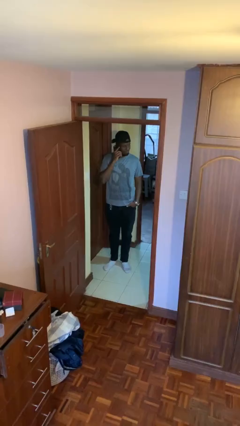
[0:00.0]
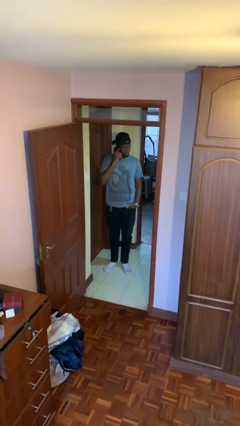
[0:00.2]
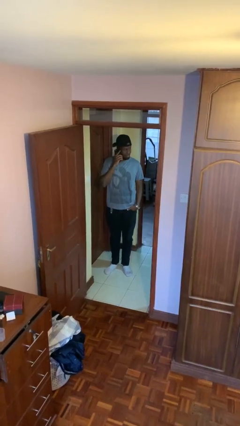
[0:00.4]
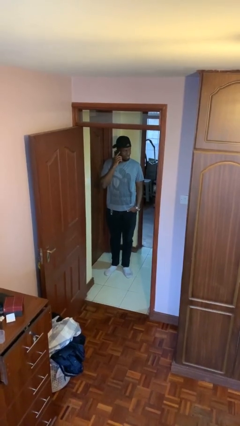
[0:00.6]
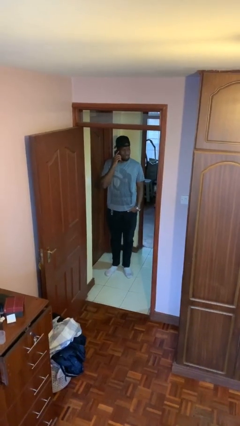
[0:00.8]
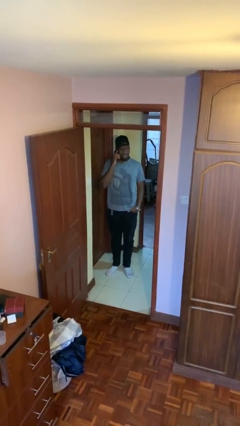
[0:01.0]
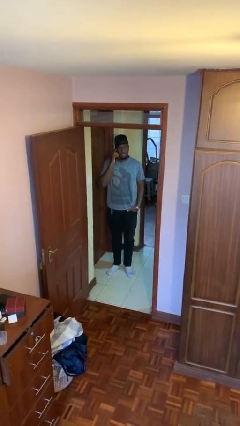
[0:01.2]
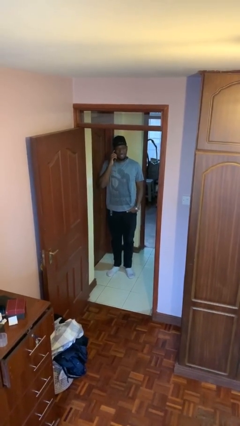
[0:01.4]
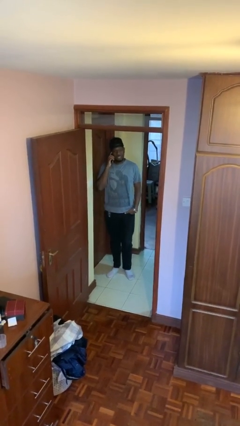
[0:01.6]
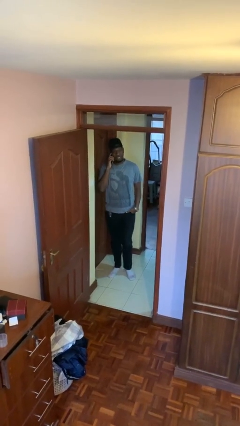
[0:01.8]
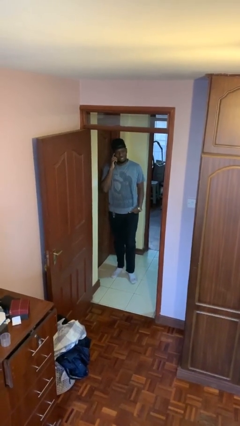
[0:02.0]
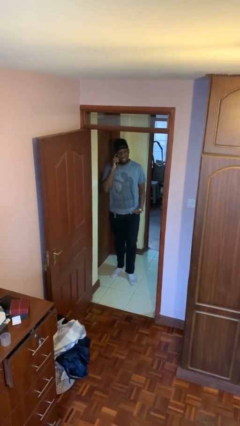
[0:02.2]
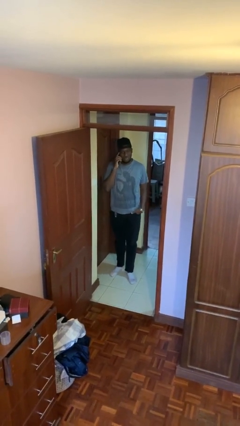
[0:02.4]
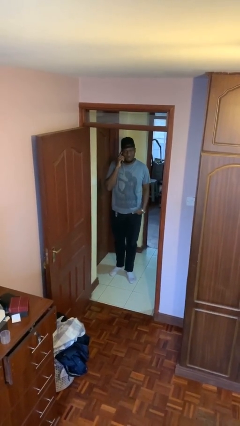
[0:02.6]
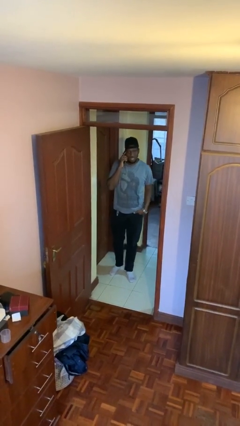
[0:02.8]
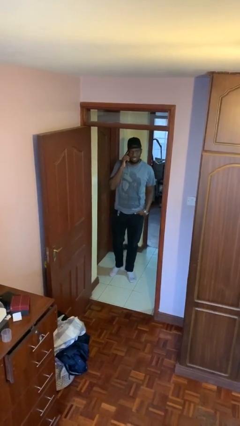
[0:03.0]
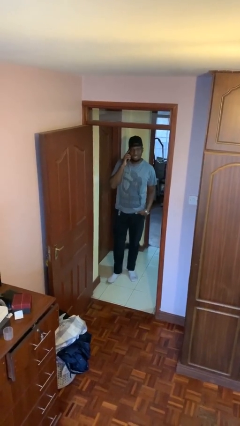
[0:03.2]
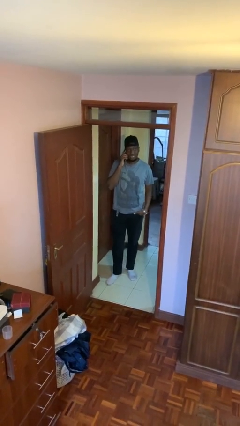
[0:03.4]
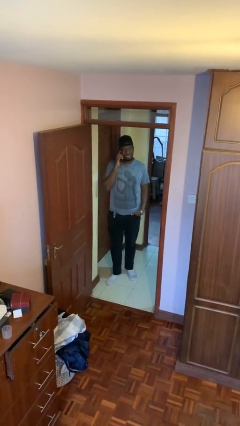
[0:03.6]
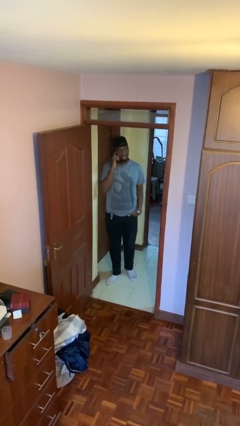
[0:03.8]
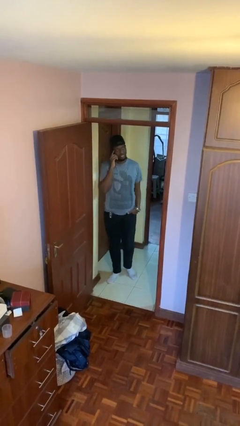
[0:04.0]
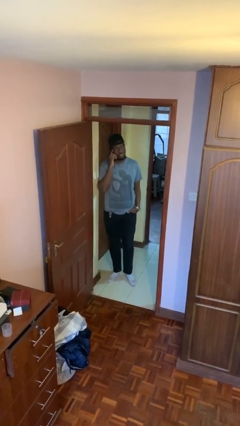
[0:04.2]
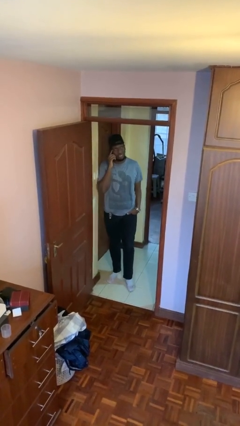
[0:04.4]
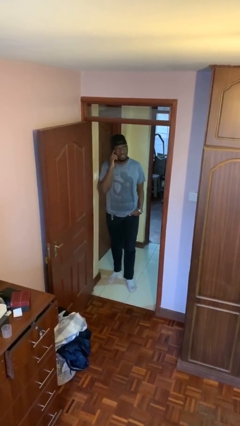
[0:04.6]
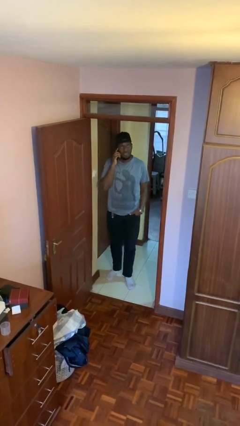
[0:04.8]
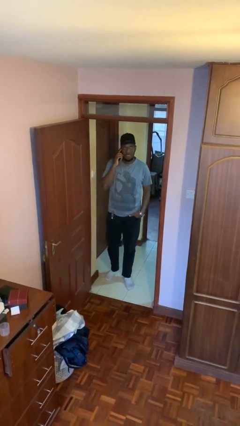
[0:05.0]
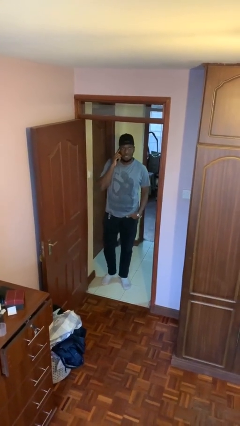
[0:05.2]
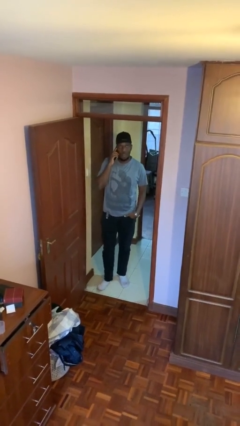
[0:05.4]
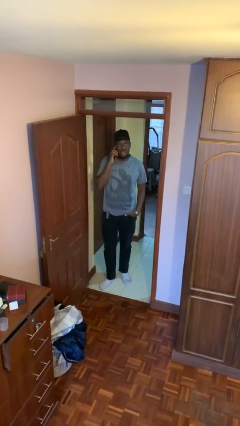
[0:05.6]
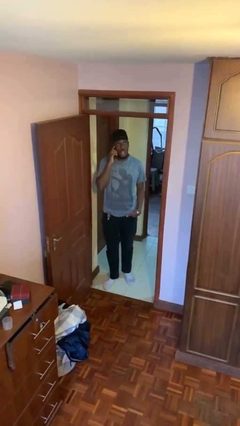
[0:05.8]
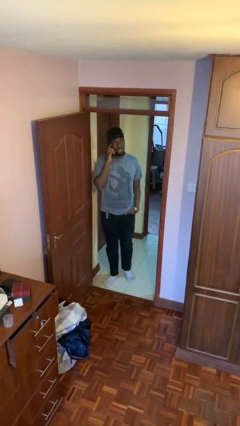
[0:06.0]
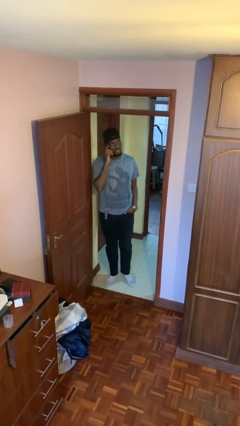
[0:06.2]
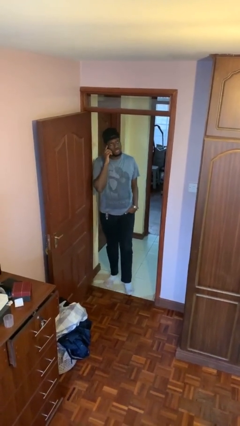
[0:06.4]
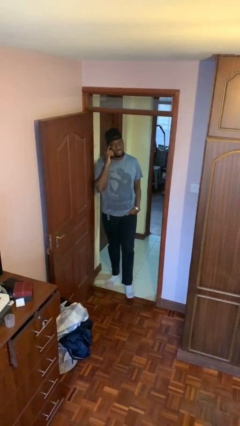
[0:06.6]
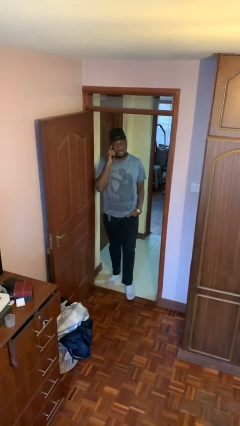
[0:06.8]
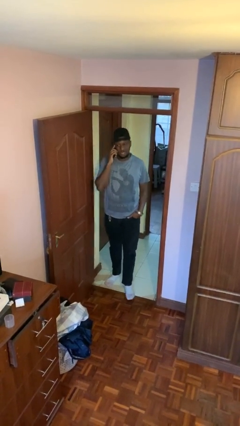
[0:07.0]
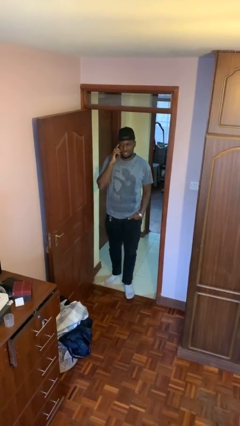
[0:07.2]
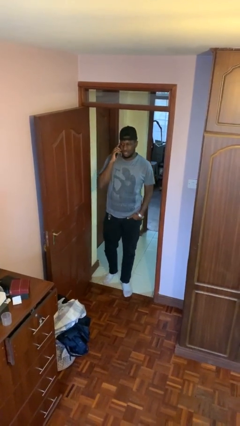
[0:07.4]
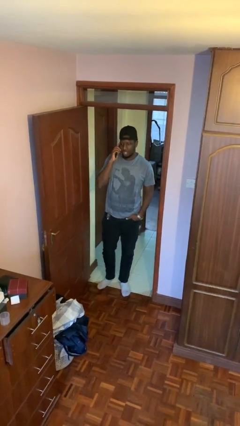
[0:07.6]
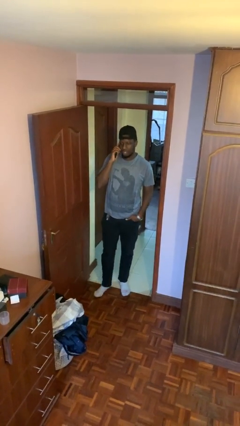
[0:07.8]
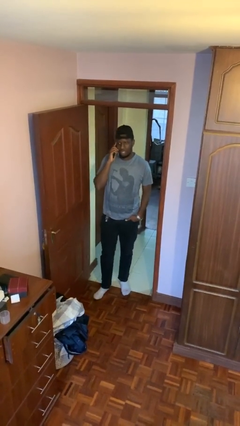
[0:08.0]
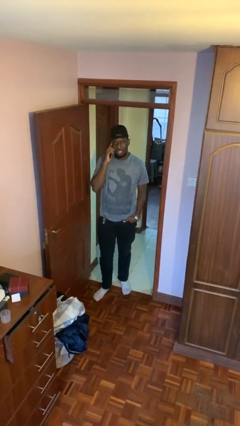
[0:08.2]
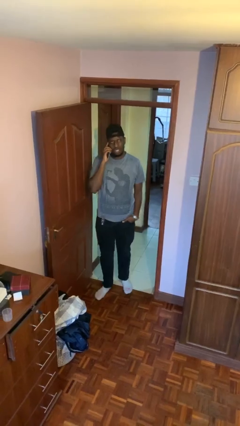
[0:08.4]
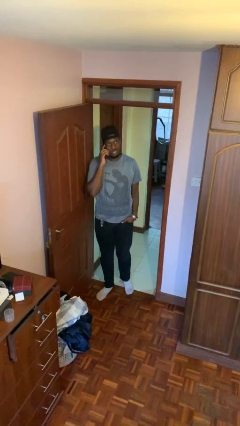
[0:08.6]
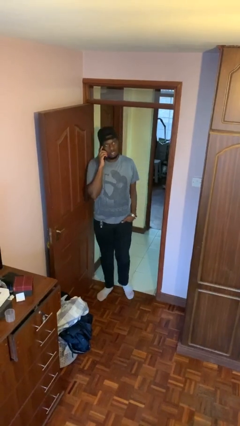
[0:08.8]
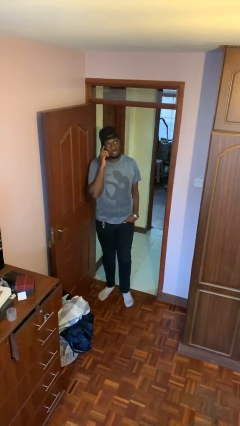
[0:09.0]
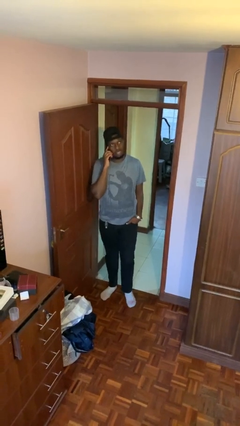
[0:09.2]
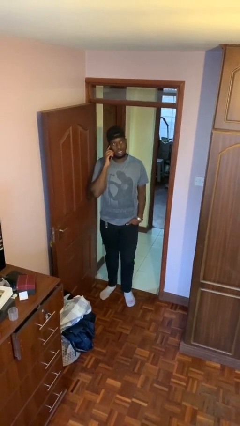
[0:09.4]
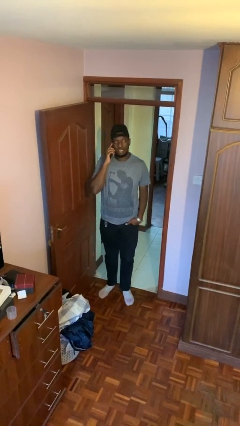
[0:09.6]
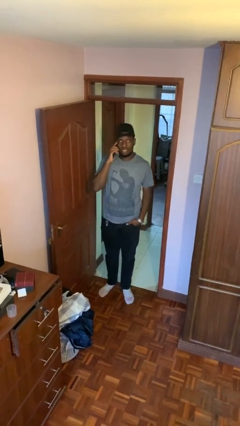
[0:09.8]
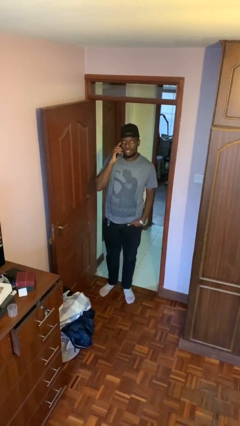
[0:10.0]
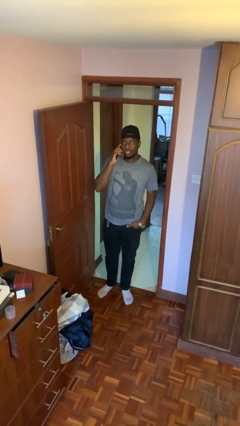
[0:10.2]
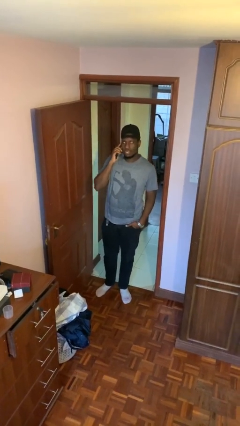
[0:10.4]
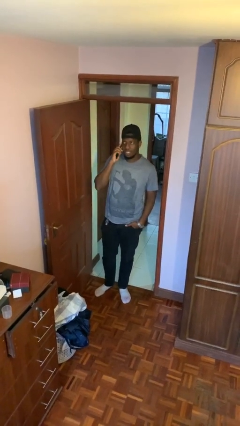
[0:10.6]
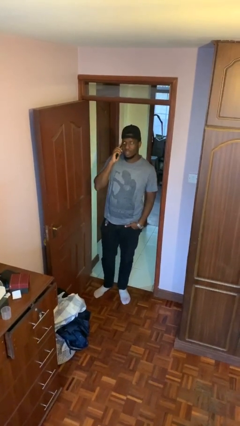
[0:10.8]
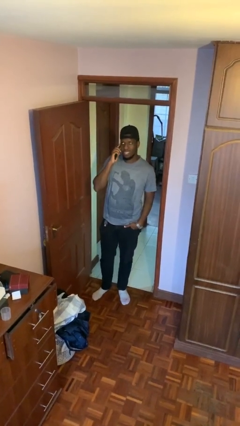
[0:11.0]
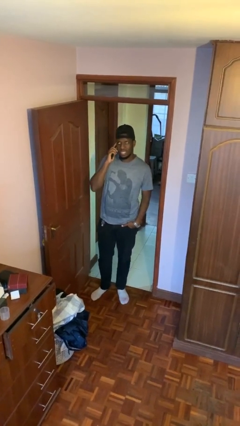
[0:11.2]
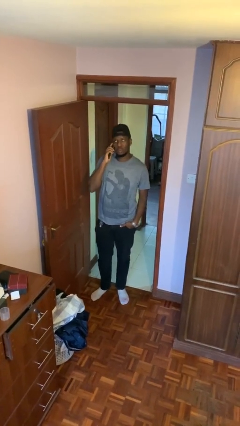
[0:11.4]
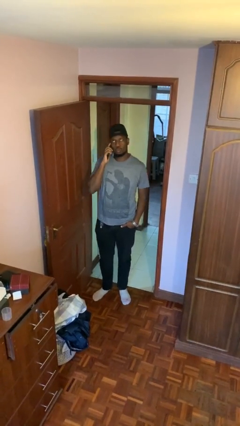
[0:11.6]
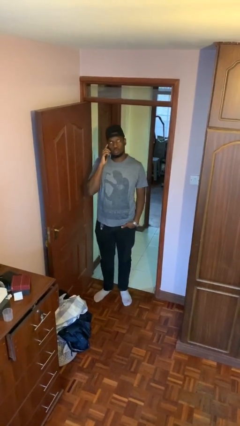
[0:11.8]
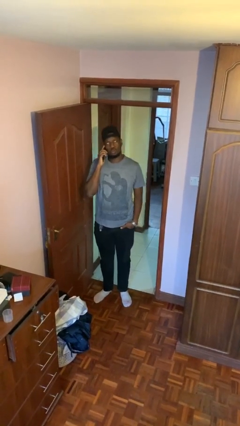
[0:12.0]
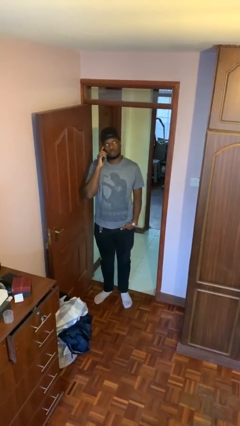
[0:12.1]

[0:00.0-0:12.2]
person enters scene through structure

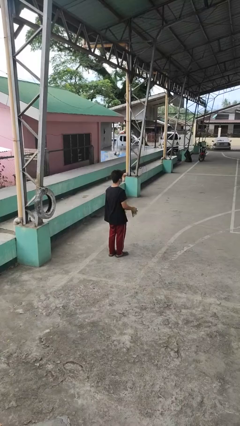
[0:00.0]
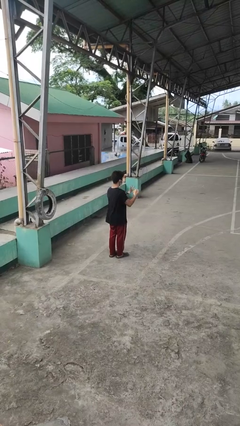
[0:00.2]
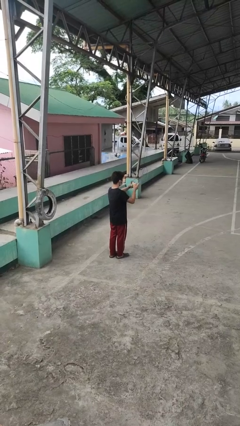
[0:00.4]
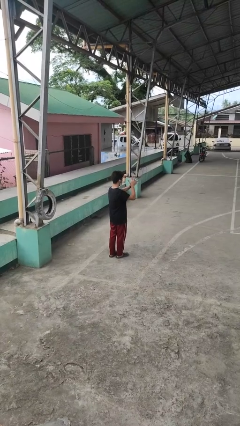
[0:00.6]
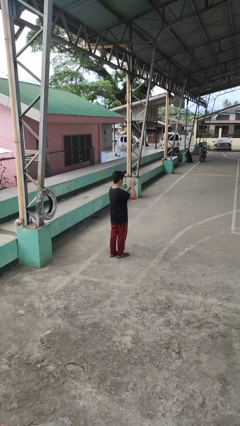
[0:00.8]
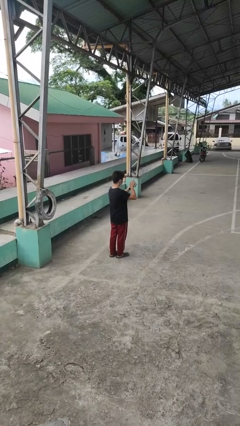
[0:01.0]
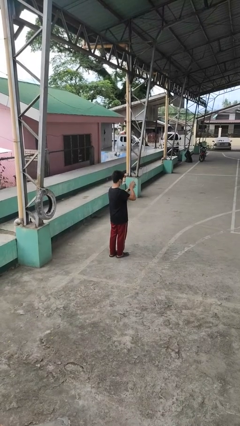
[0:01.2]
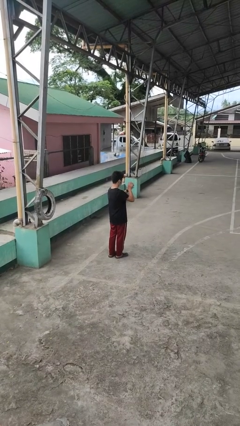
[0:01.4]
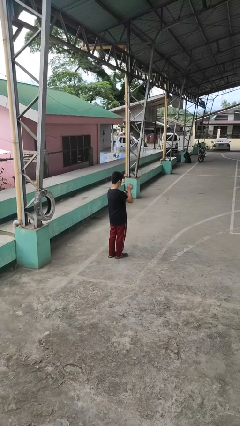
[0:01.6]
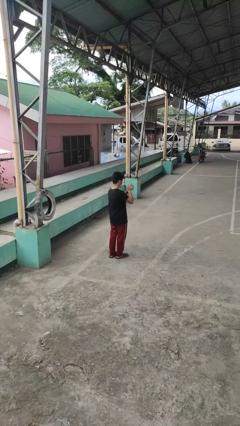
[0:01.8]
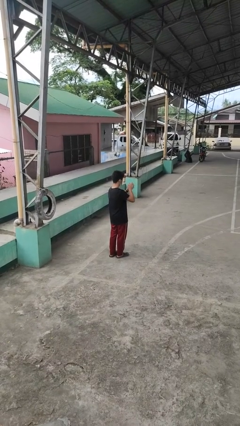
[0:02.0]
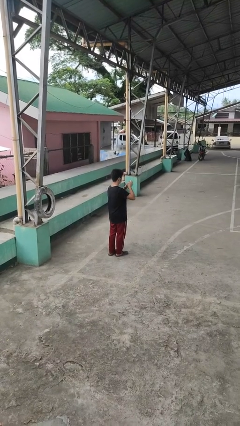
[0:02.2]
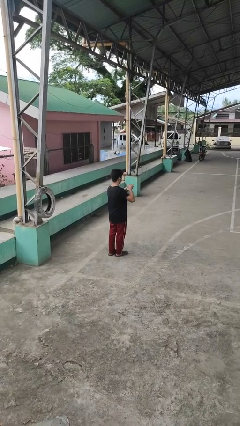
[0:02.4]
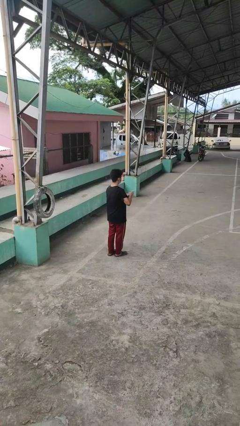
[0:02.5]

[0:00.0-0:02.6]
person squeezes object

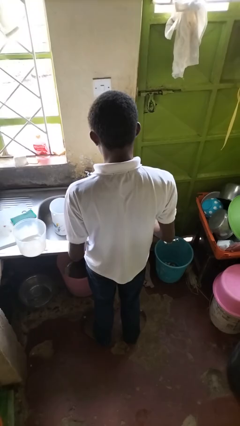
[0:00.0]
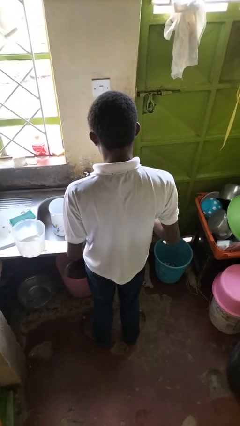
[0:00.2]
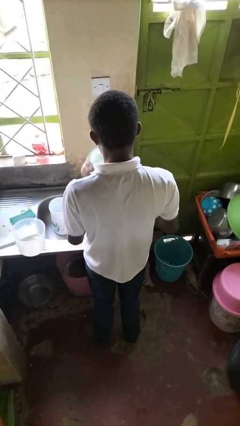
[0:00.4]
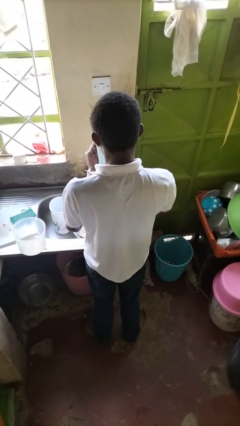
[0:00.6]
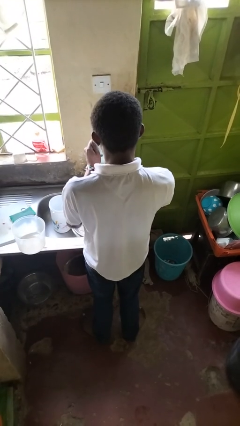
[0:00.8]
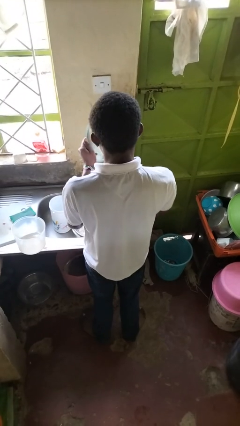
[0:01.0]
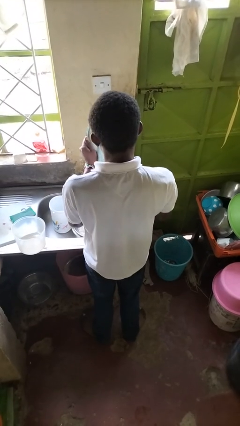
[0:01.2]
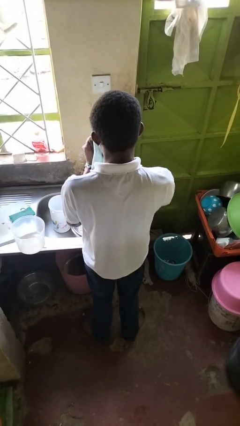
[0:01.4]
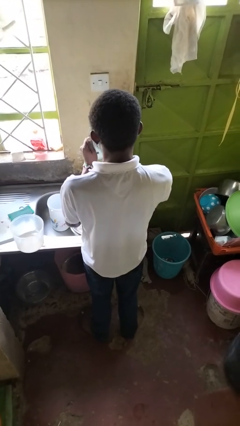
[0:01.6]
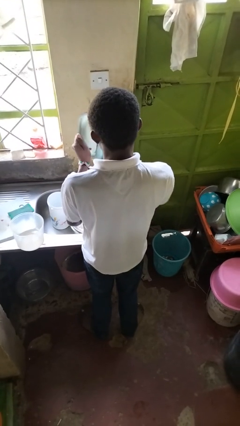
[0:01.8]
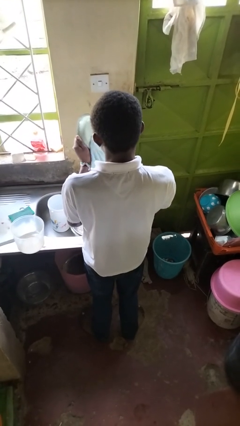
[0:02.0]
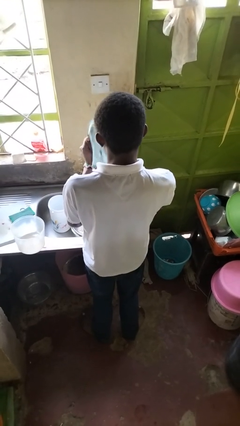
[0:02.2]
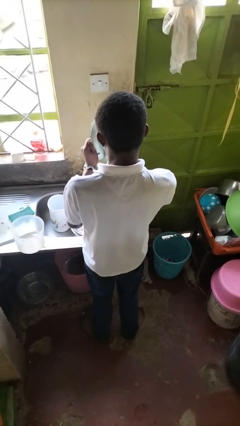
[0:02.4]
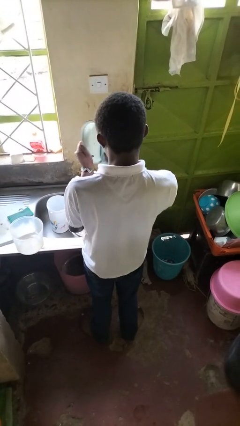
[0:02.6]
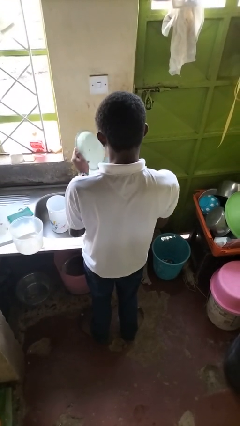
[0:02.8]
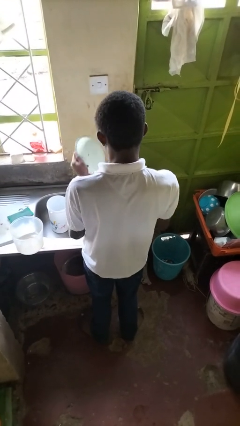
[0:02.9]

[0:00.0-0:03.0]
person dries dish
